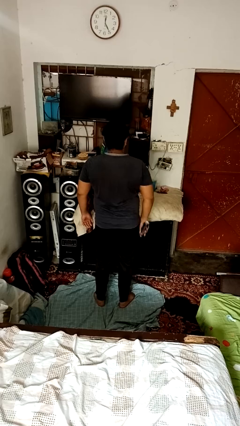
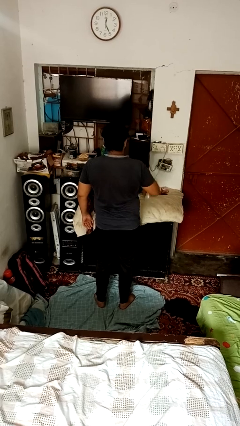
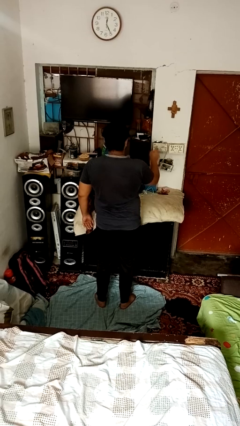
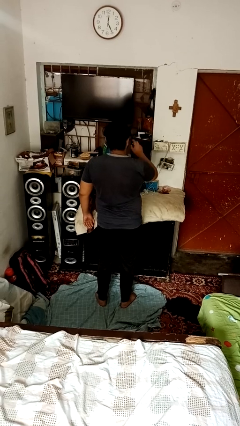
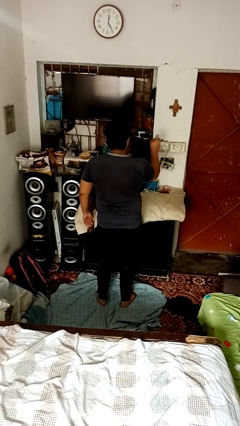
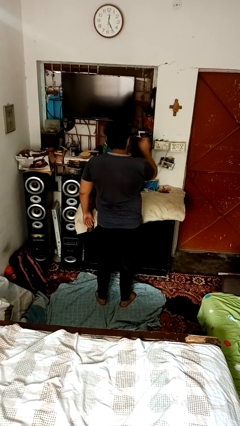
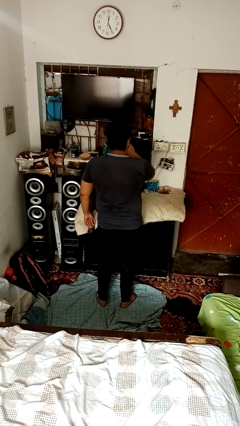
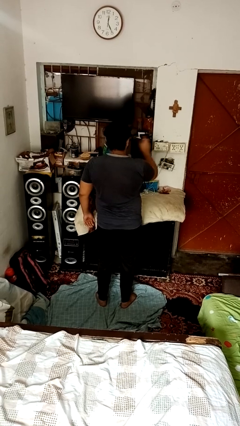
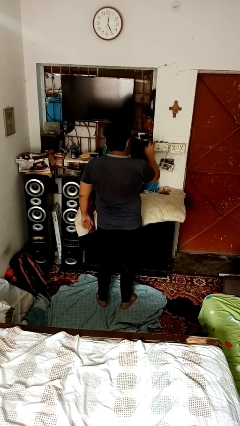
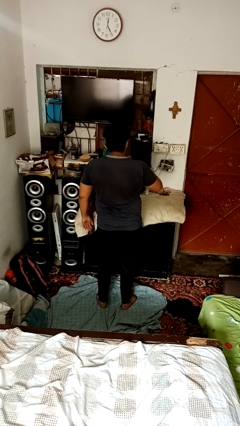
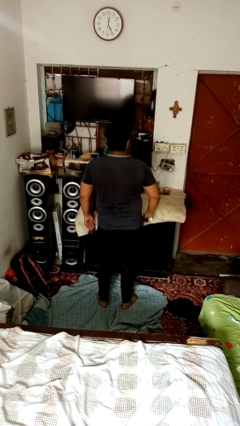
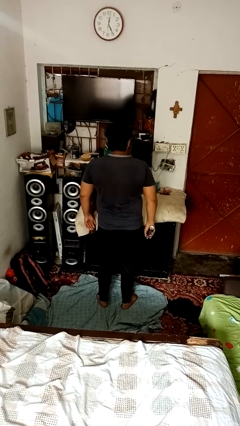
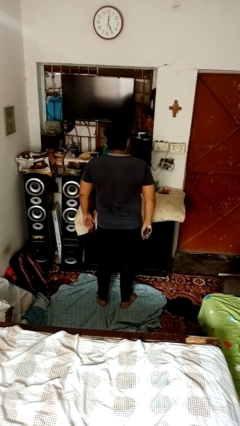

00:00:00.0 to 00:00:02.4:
person sprays from bottle

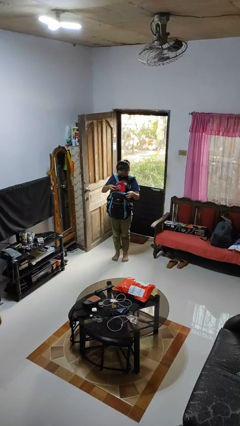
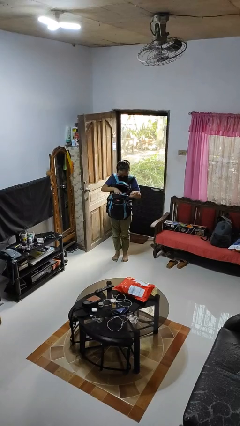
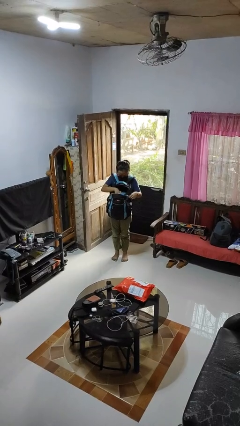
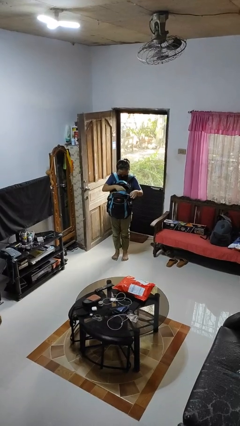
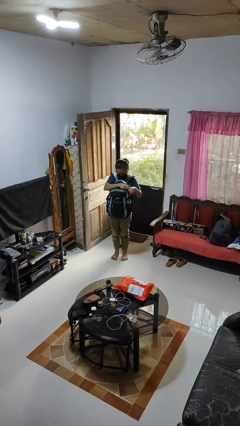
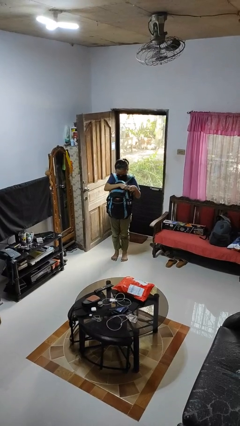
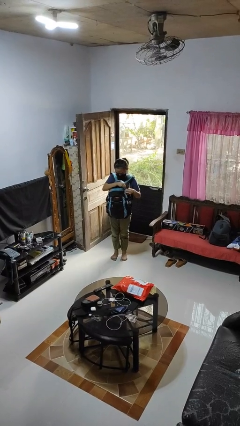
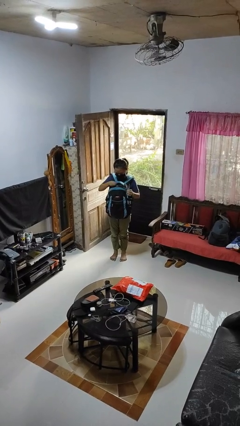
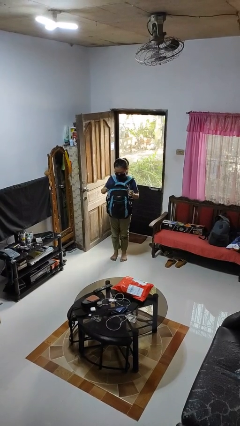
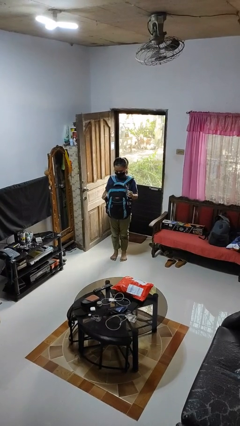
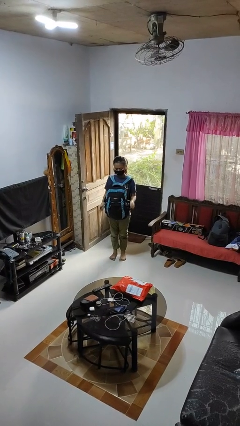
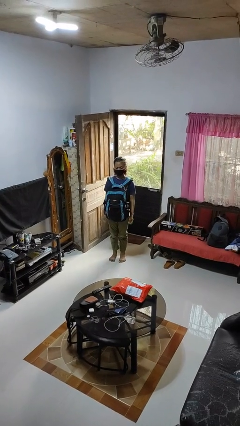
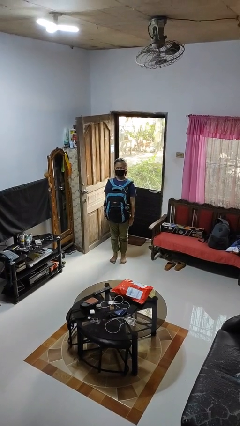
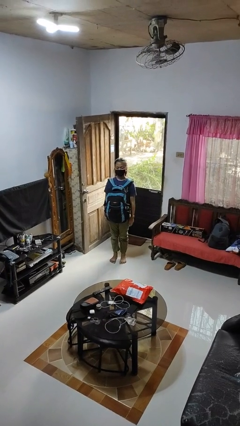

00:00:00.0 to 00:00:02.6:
person puts object into backpack

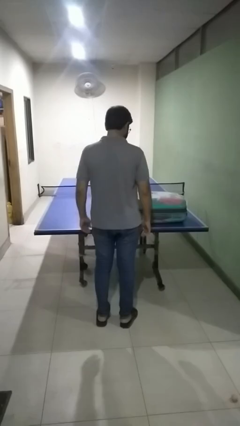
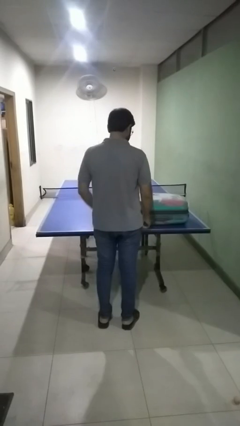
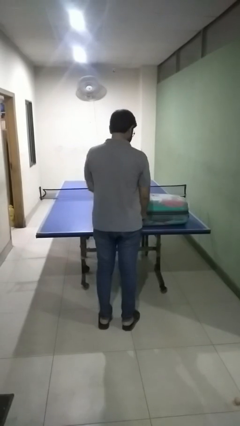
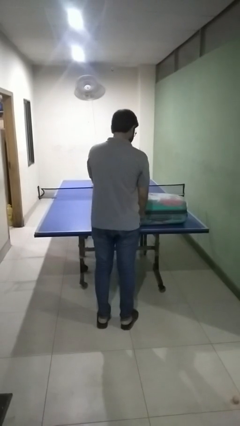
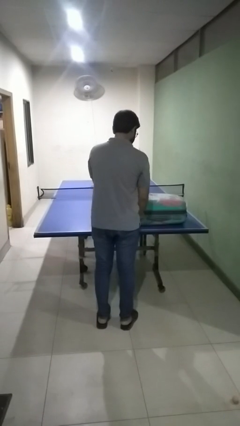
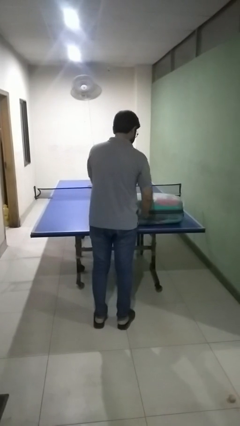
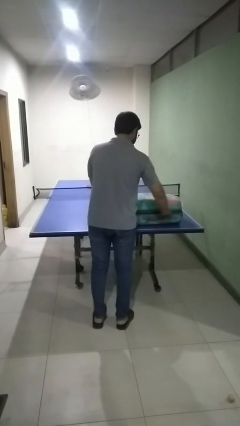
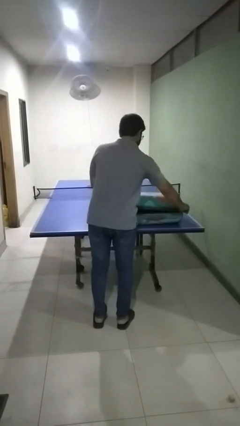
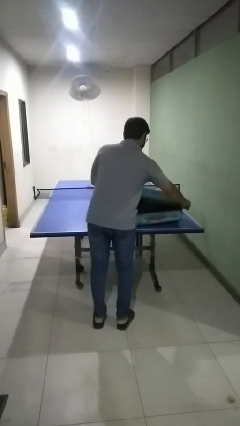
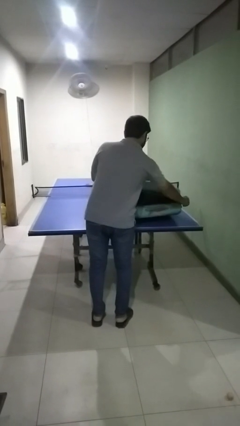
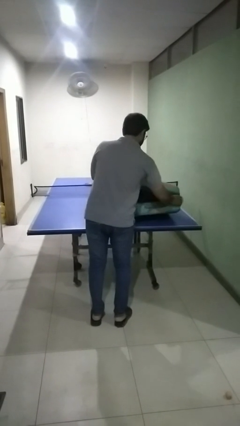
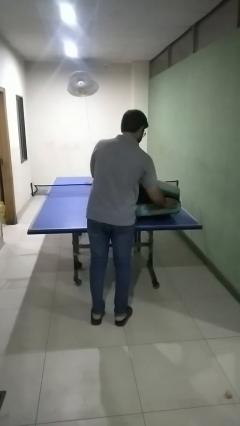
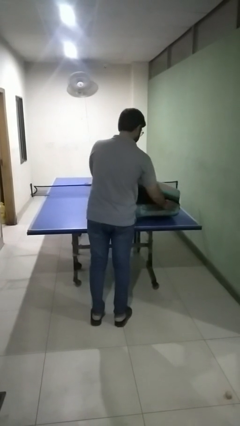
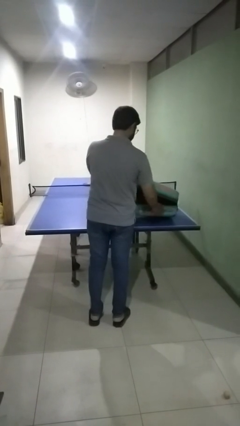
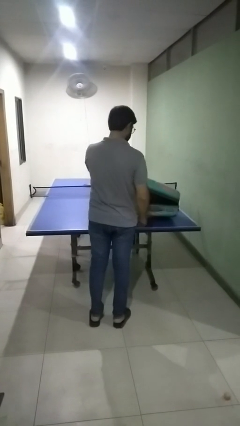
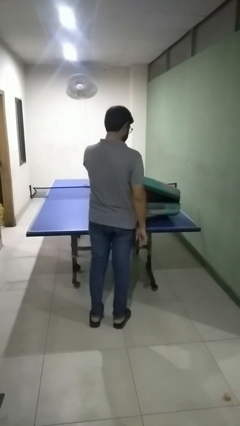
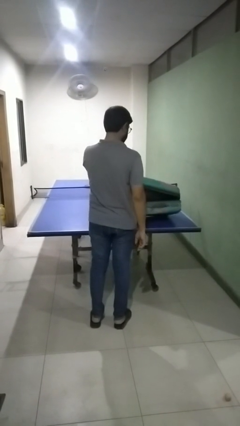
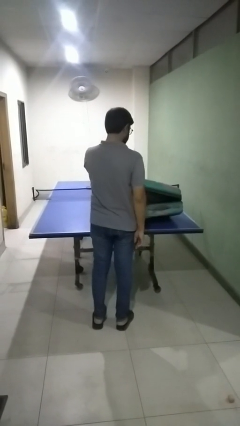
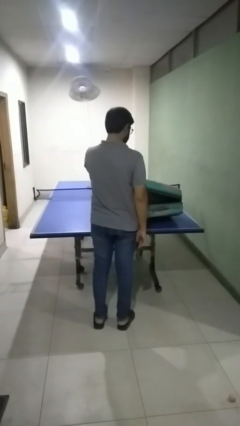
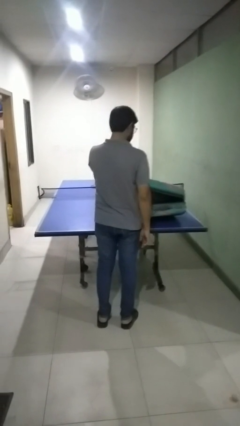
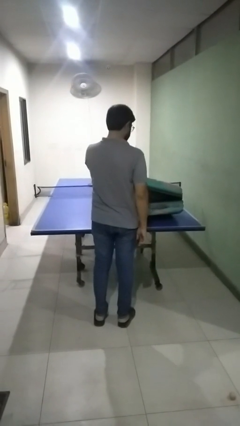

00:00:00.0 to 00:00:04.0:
person opens suitcase

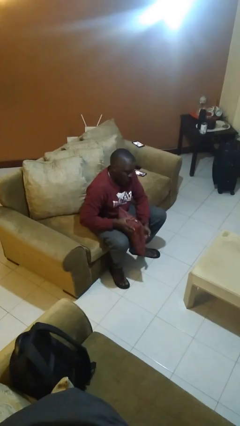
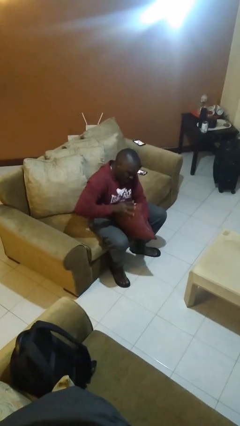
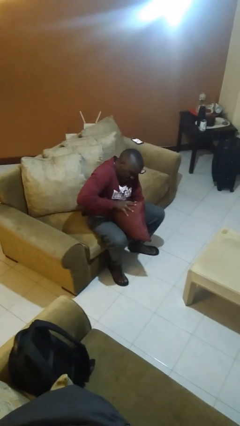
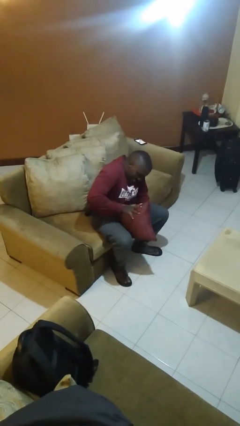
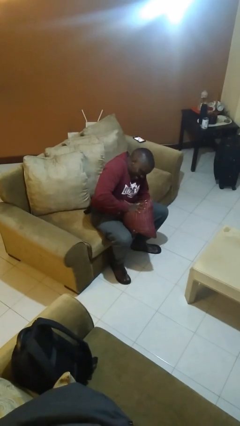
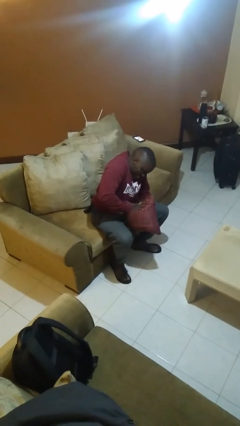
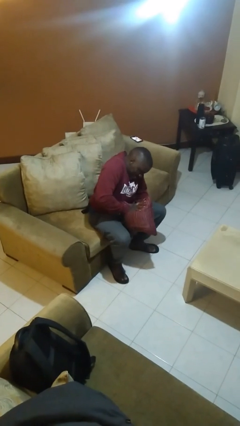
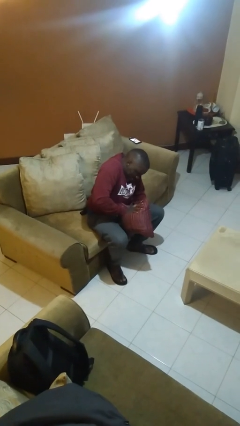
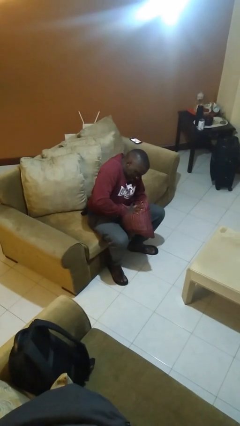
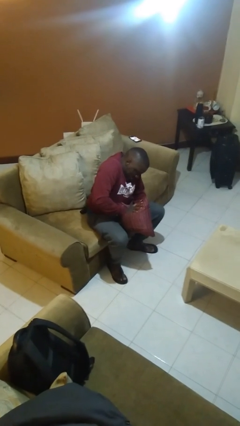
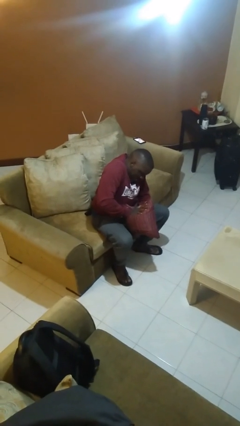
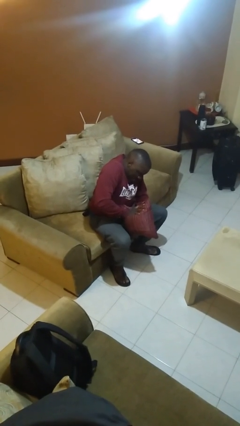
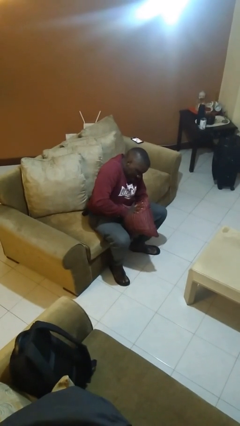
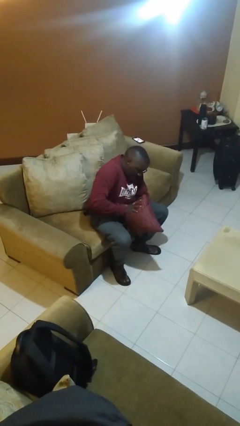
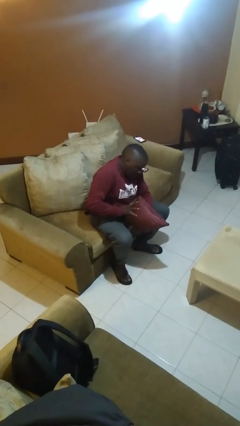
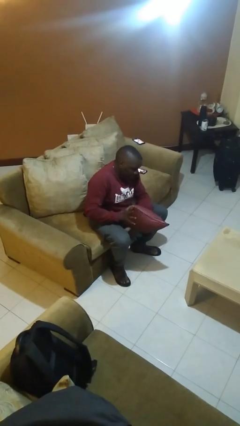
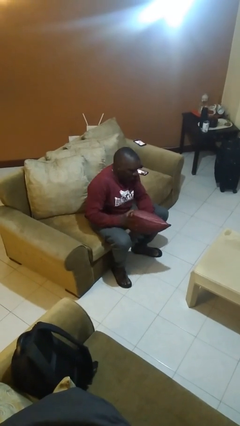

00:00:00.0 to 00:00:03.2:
person squeezes object

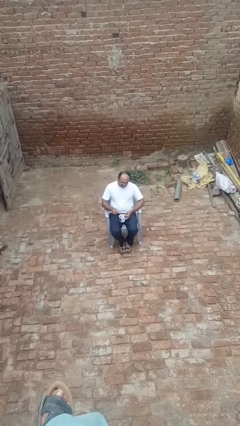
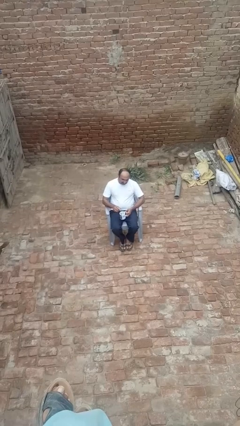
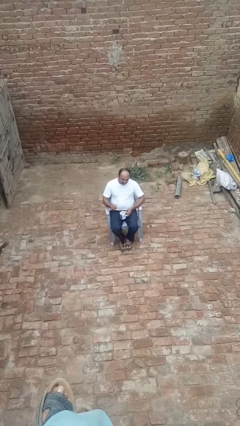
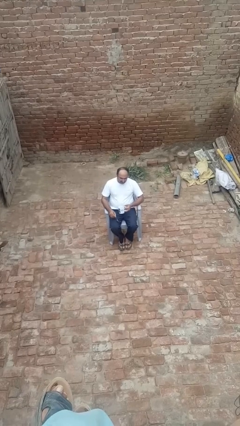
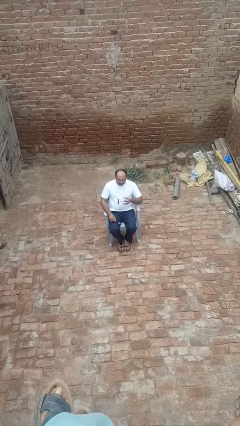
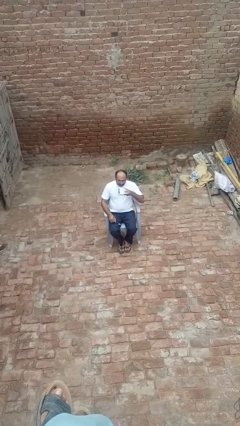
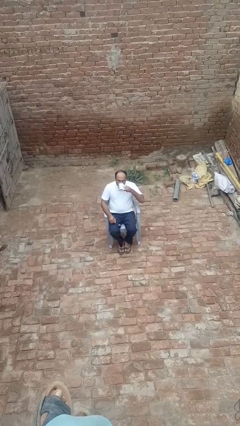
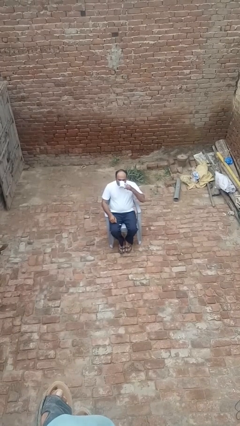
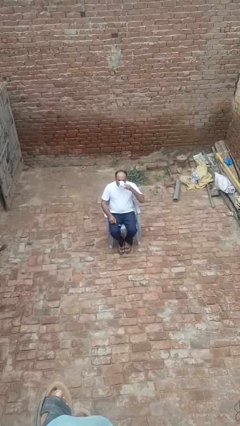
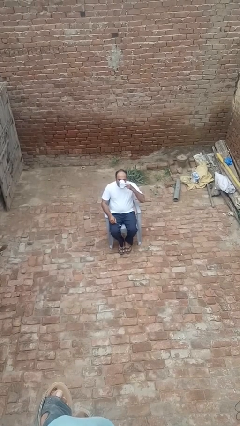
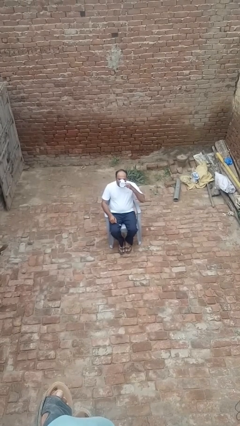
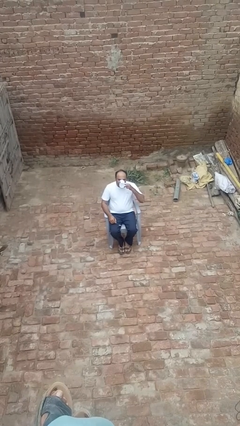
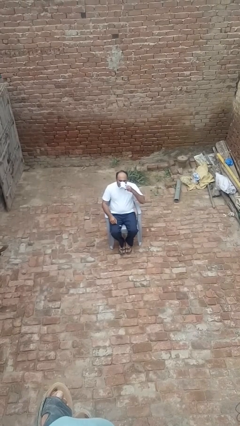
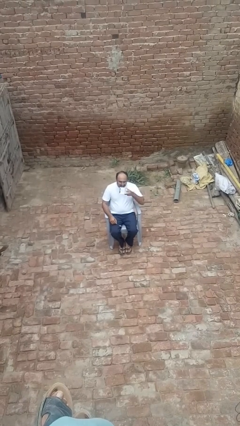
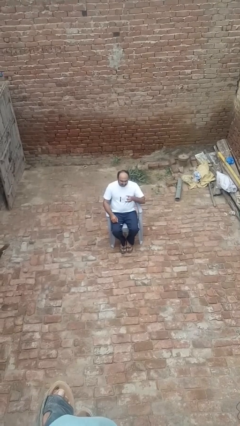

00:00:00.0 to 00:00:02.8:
person drinks from mug

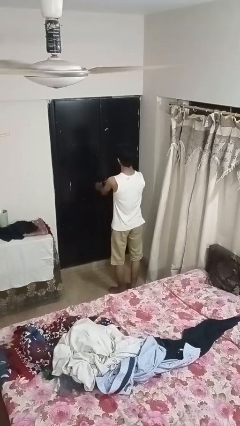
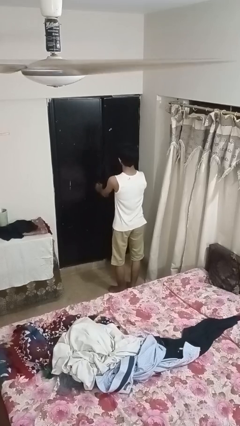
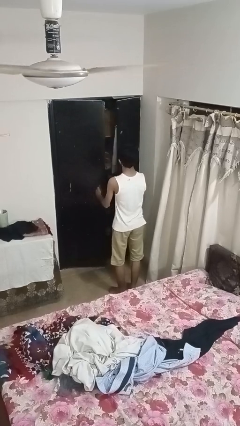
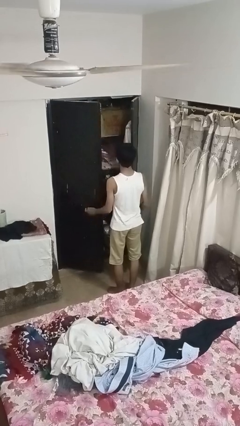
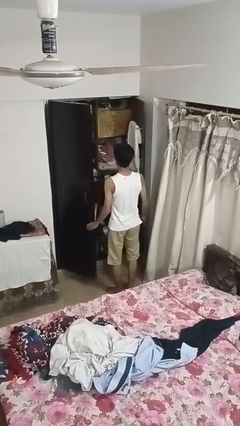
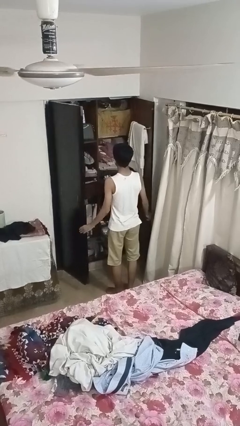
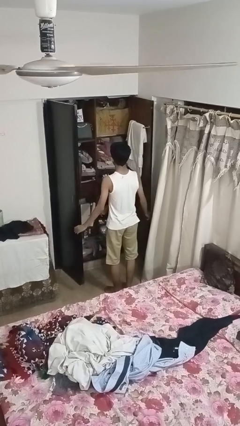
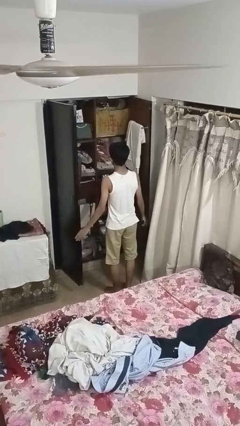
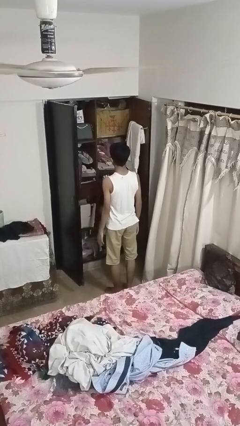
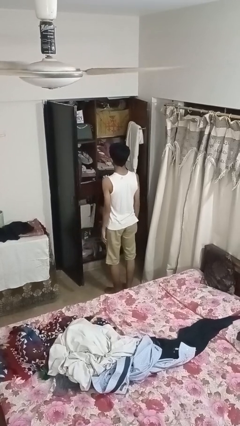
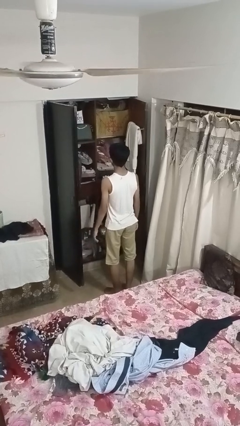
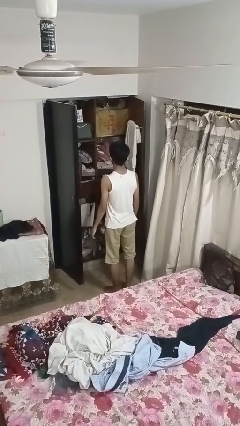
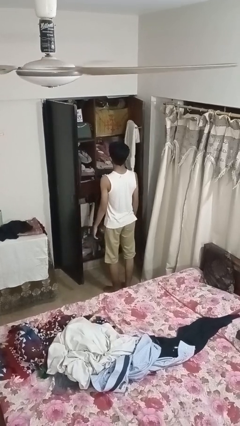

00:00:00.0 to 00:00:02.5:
person opens closet door
